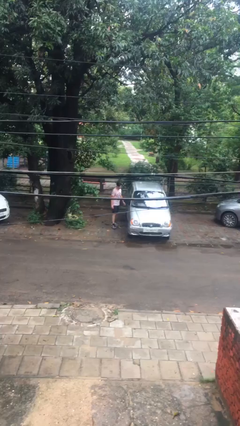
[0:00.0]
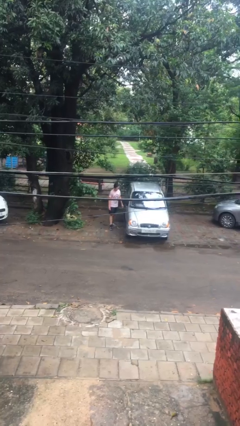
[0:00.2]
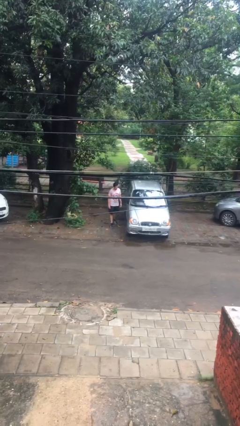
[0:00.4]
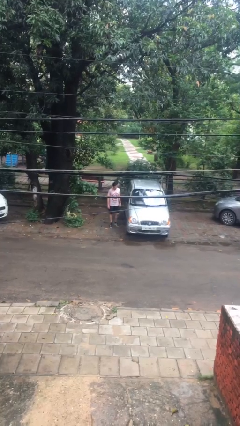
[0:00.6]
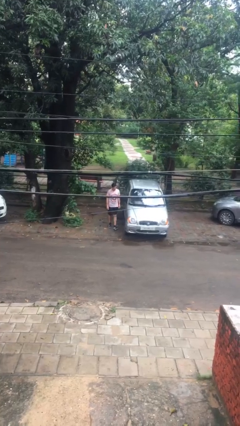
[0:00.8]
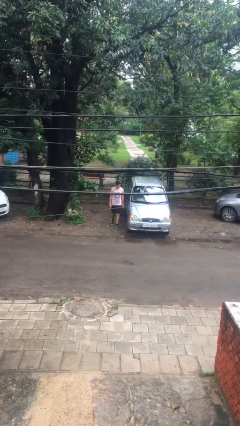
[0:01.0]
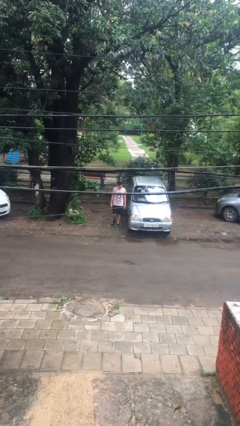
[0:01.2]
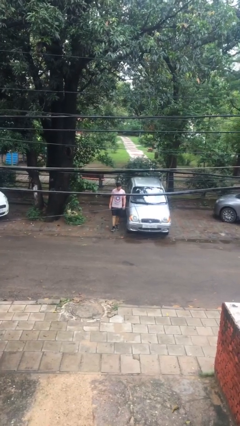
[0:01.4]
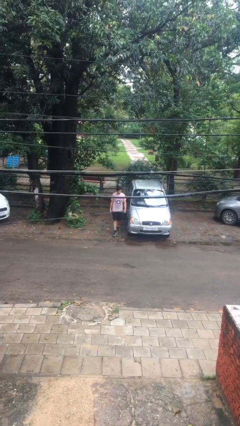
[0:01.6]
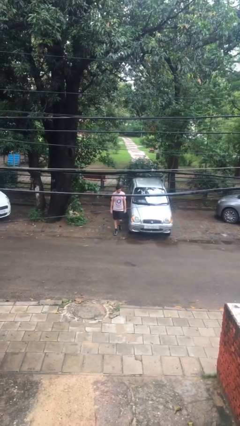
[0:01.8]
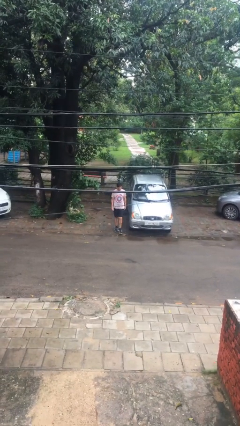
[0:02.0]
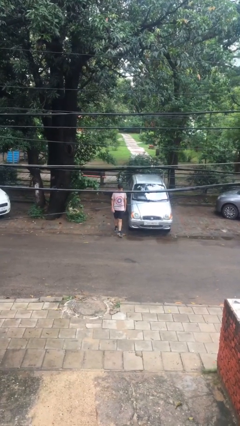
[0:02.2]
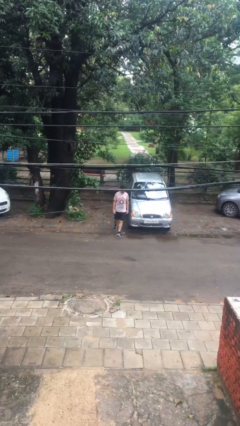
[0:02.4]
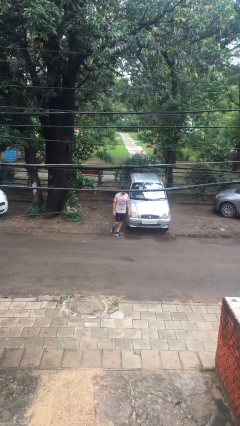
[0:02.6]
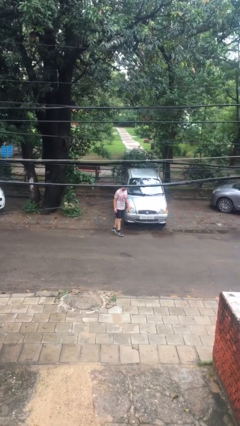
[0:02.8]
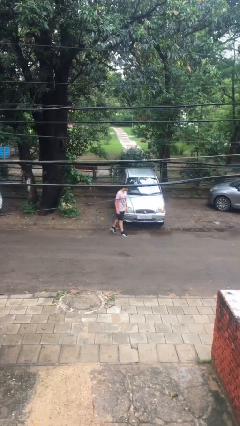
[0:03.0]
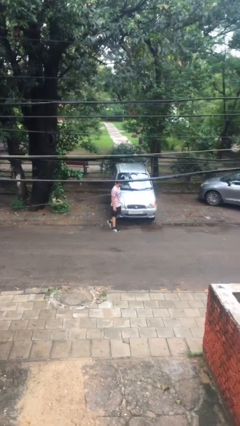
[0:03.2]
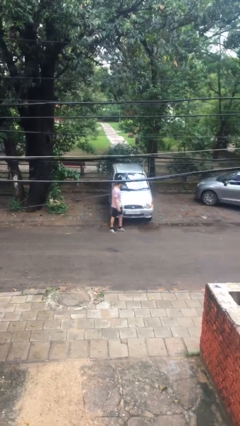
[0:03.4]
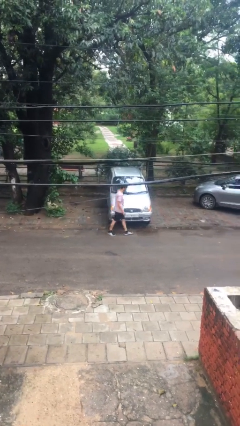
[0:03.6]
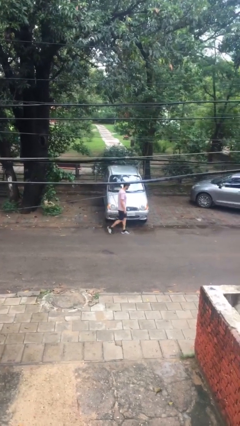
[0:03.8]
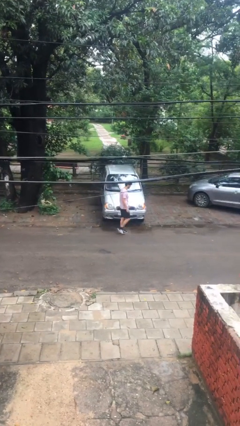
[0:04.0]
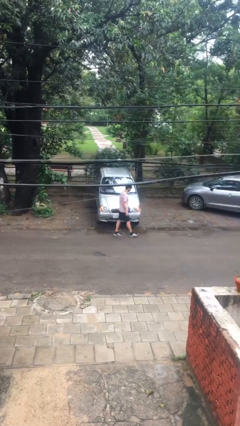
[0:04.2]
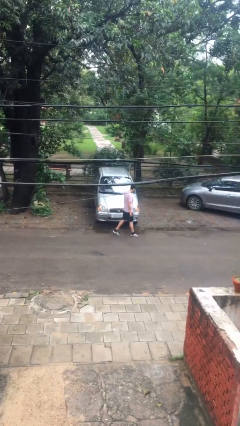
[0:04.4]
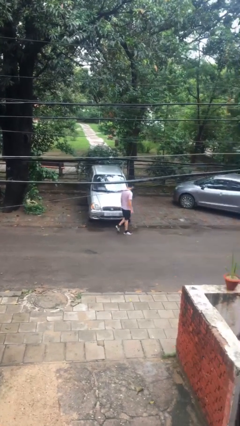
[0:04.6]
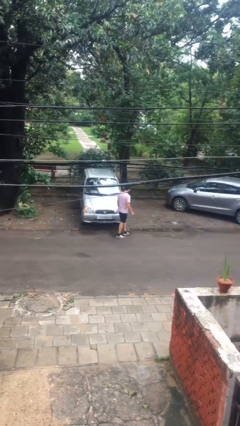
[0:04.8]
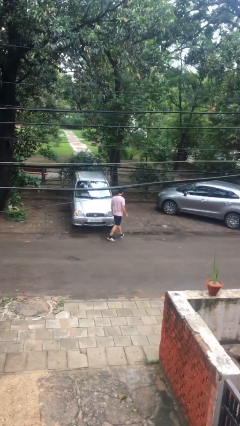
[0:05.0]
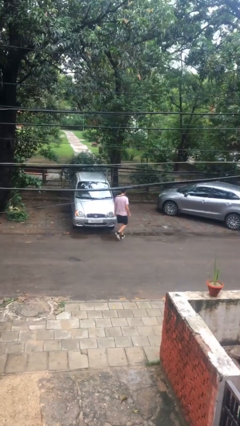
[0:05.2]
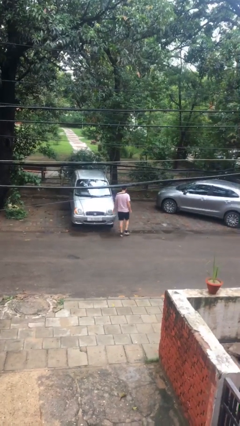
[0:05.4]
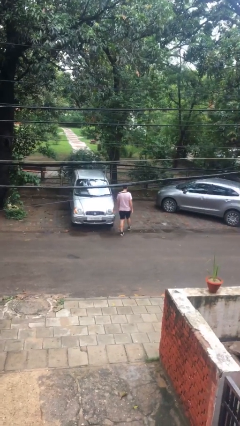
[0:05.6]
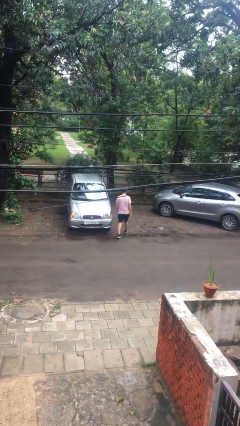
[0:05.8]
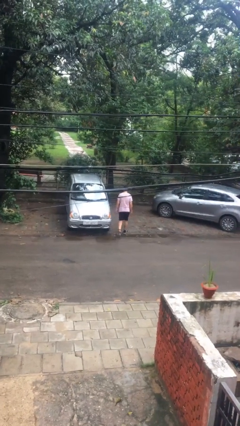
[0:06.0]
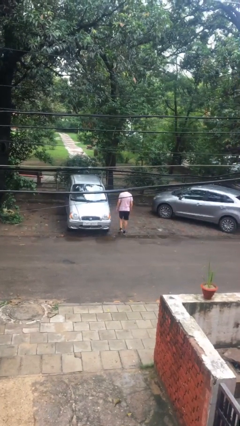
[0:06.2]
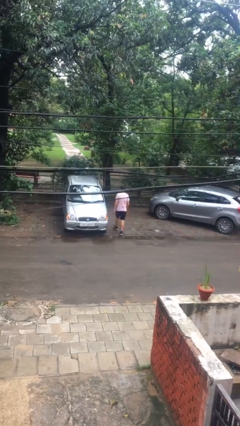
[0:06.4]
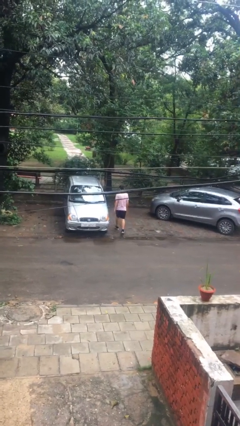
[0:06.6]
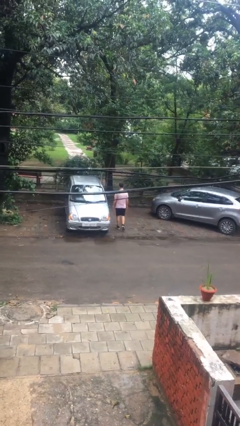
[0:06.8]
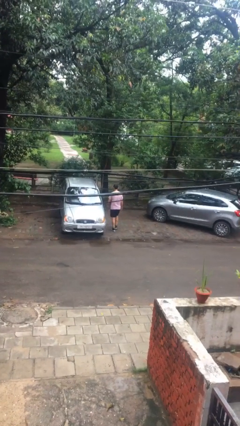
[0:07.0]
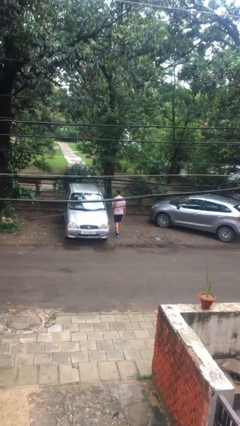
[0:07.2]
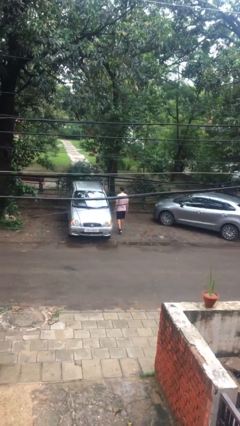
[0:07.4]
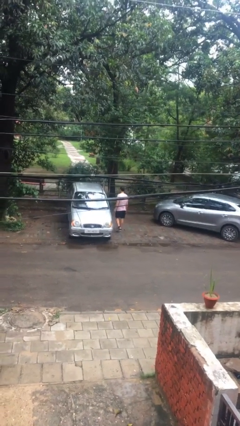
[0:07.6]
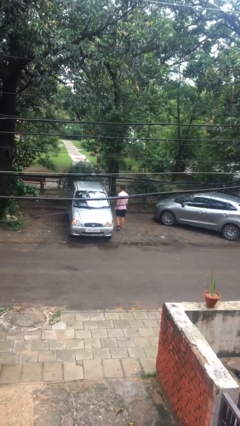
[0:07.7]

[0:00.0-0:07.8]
person walks around car

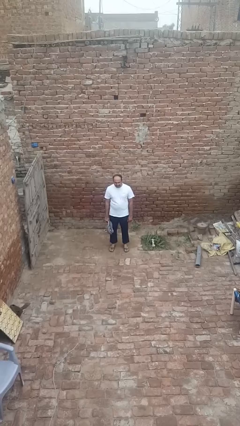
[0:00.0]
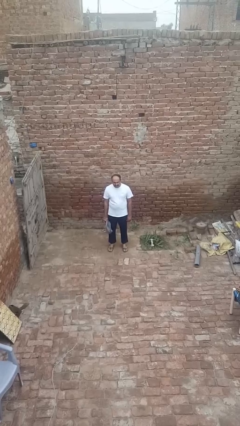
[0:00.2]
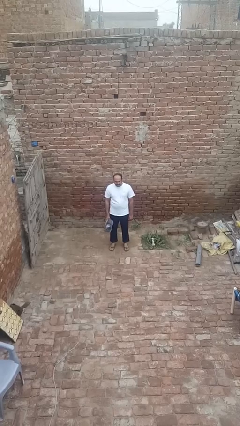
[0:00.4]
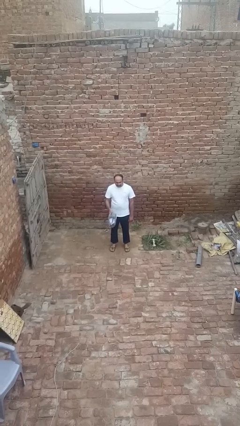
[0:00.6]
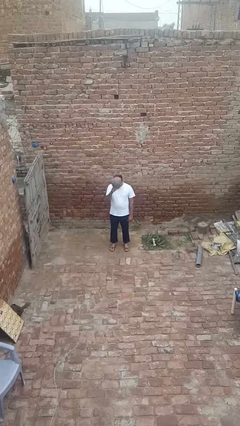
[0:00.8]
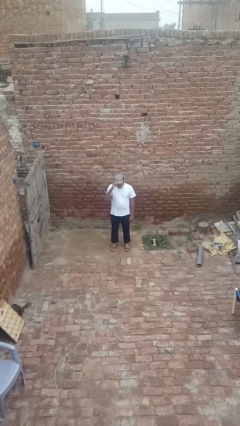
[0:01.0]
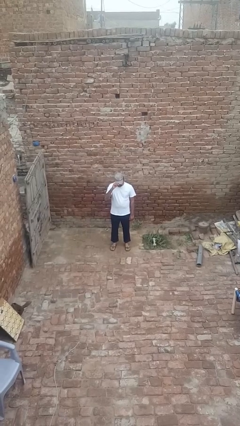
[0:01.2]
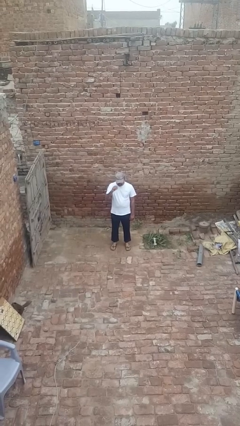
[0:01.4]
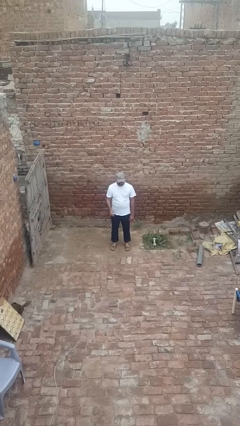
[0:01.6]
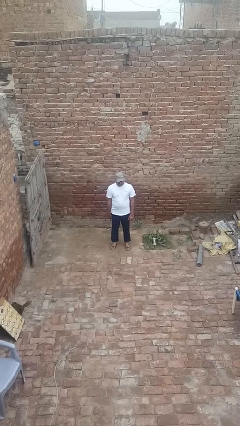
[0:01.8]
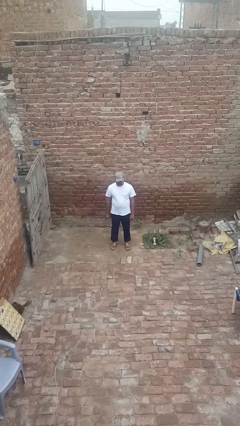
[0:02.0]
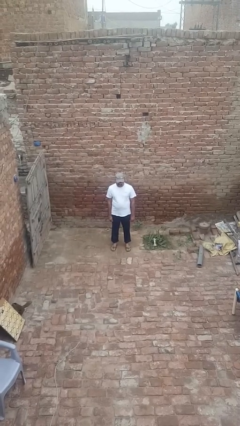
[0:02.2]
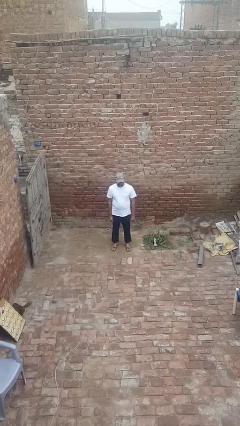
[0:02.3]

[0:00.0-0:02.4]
person puts on hat

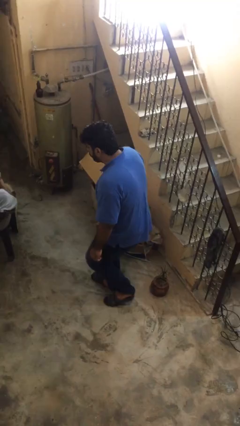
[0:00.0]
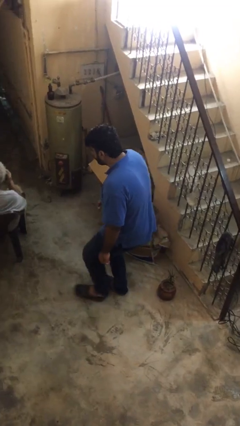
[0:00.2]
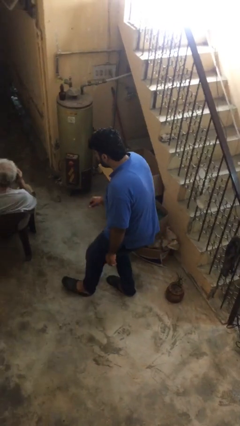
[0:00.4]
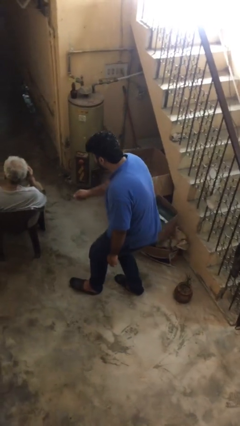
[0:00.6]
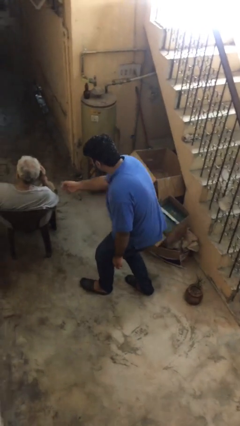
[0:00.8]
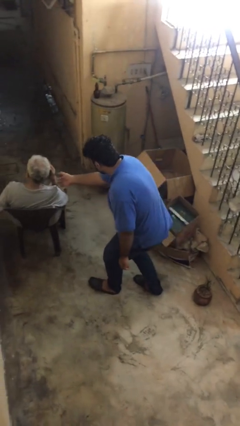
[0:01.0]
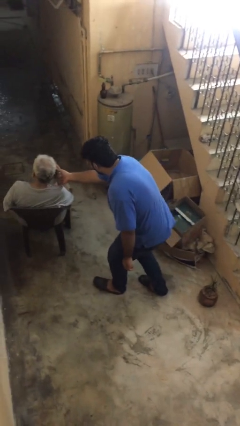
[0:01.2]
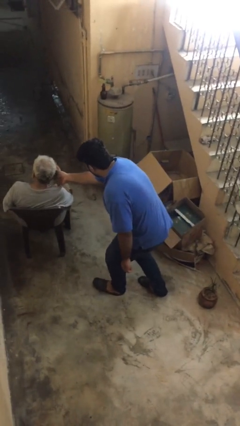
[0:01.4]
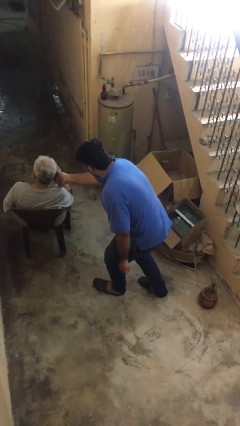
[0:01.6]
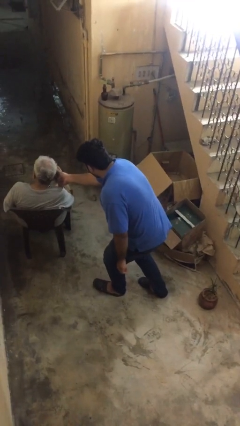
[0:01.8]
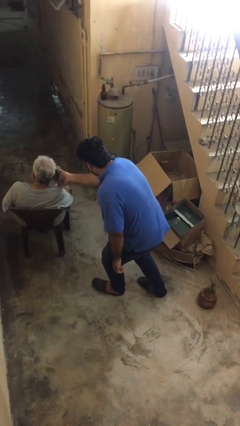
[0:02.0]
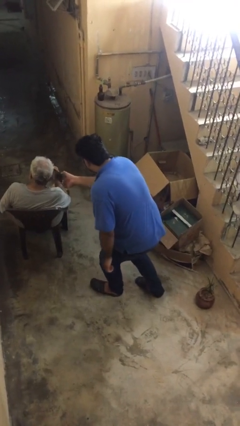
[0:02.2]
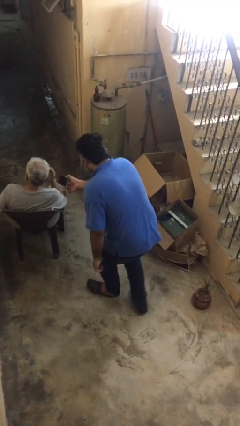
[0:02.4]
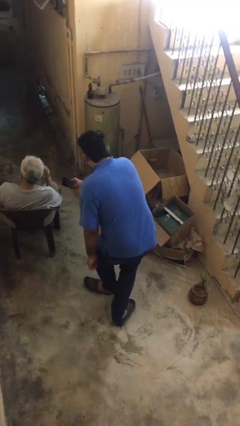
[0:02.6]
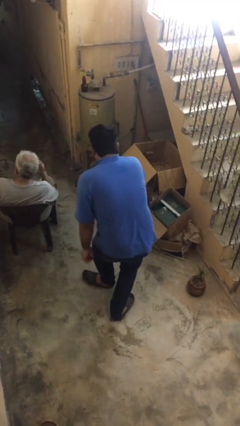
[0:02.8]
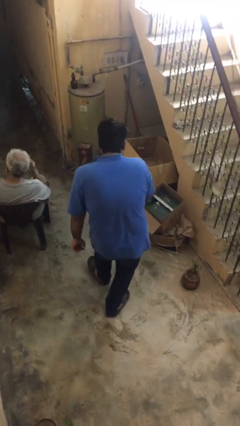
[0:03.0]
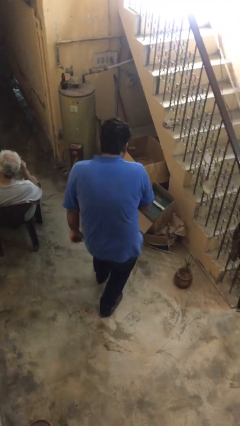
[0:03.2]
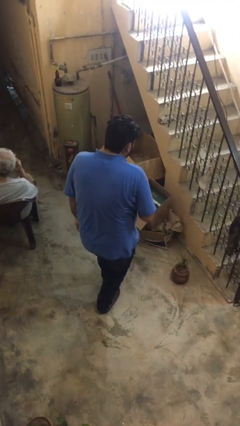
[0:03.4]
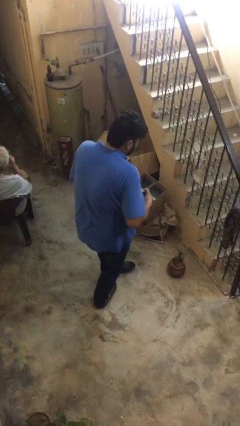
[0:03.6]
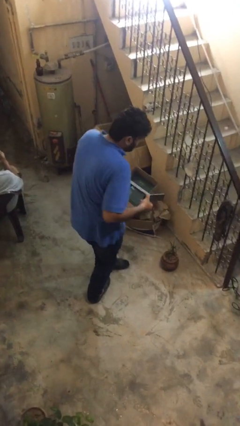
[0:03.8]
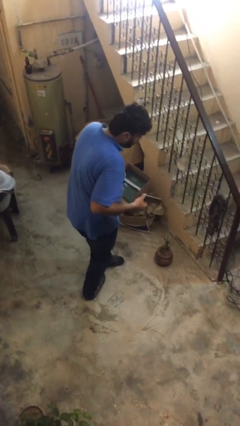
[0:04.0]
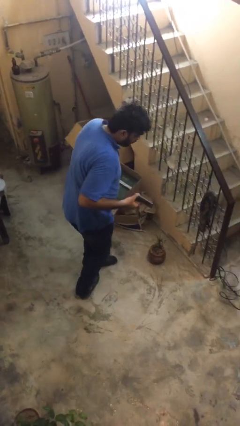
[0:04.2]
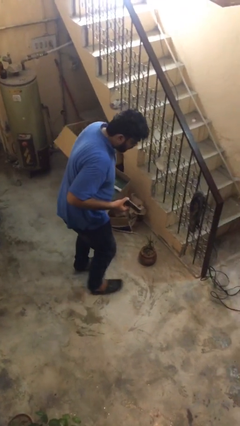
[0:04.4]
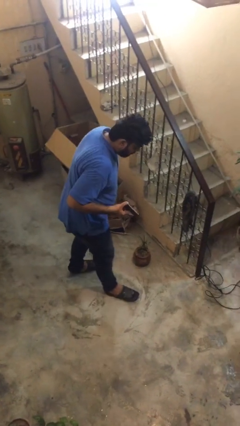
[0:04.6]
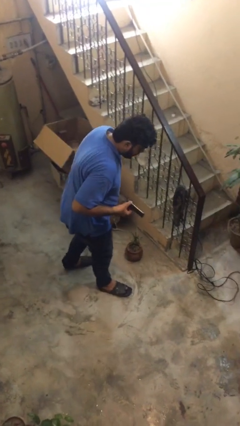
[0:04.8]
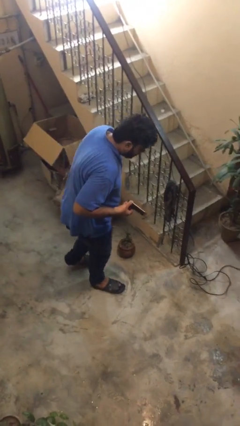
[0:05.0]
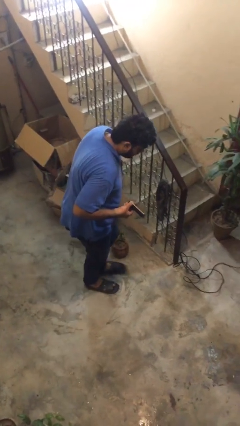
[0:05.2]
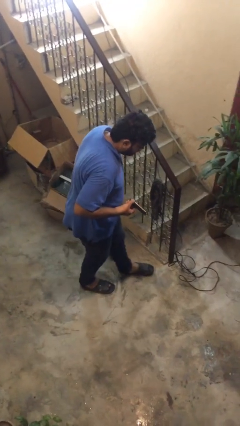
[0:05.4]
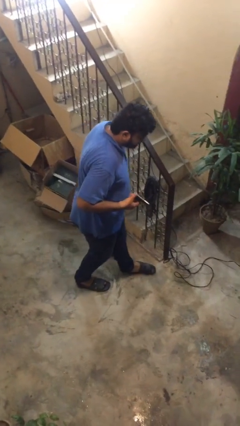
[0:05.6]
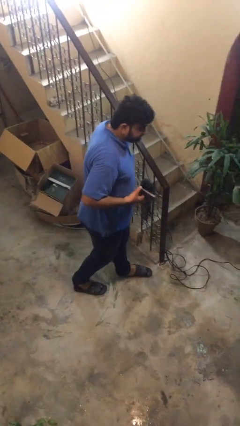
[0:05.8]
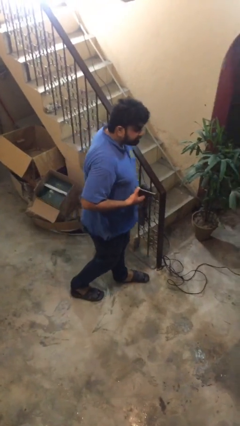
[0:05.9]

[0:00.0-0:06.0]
person steals object from person

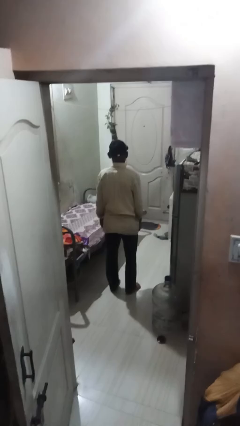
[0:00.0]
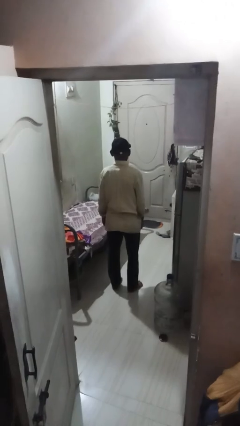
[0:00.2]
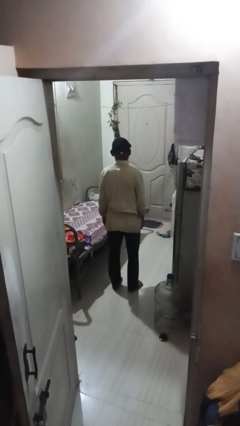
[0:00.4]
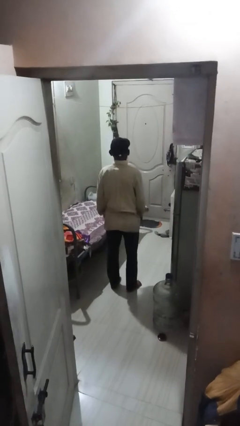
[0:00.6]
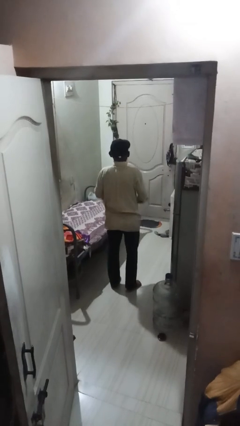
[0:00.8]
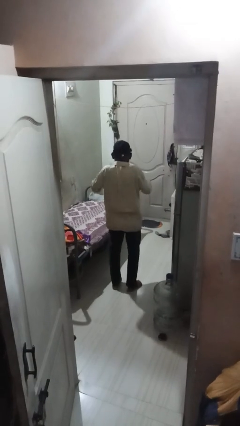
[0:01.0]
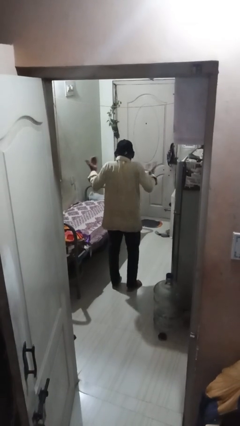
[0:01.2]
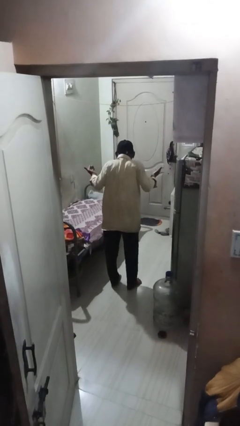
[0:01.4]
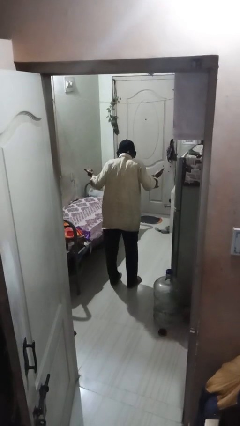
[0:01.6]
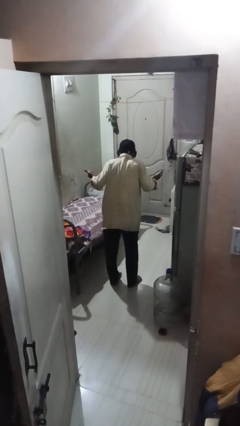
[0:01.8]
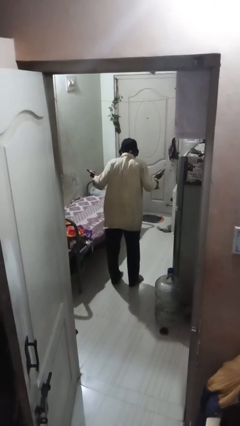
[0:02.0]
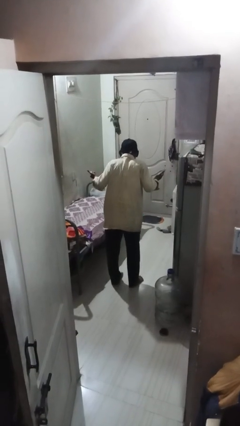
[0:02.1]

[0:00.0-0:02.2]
person shrugs
